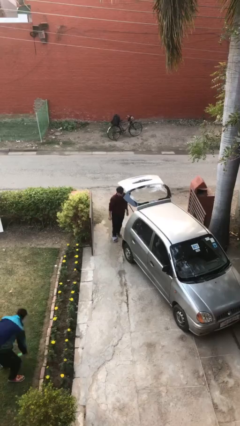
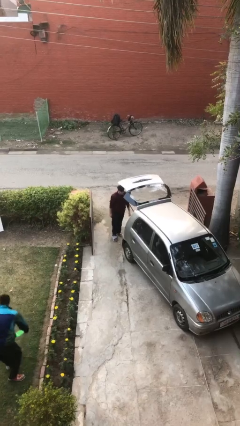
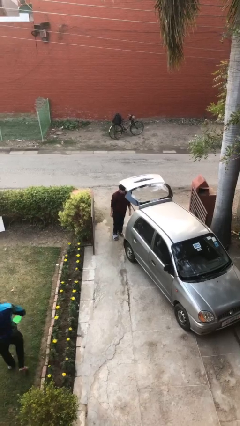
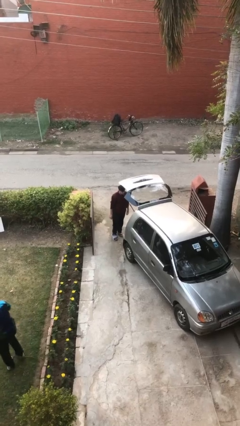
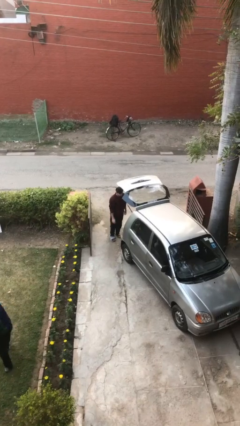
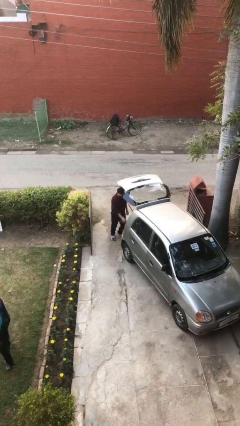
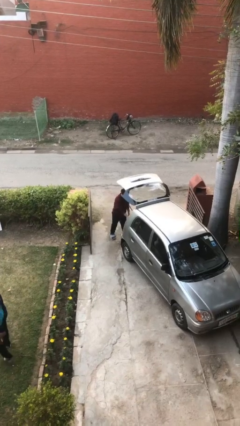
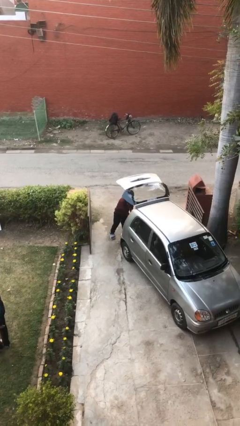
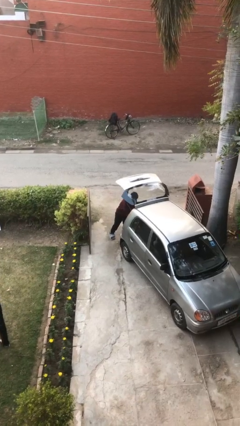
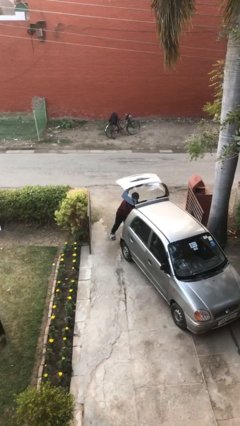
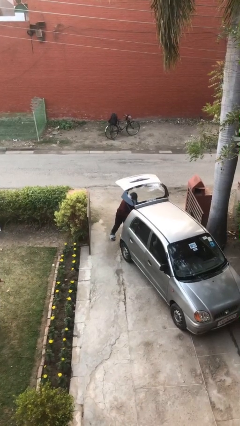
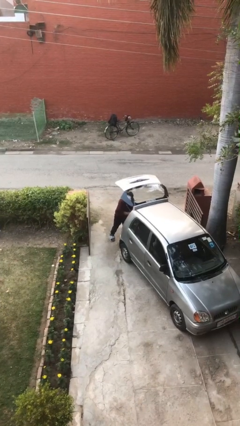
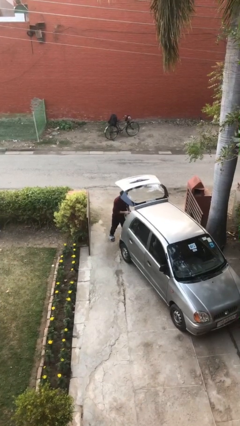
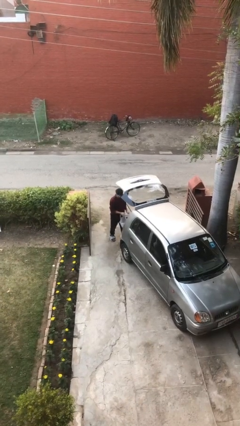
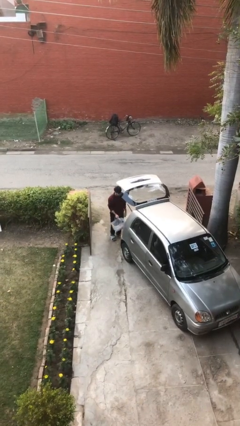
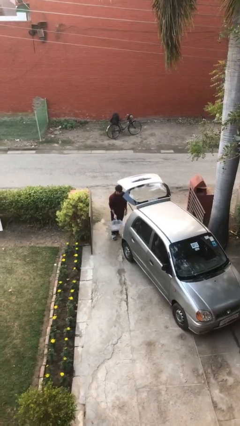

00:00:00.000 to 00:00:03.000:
person unloads car

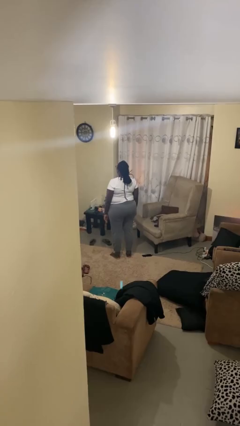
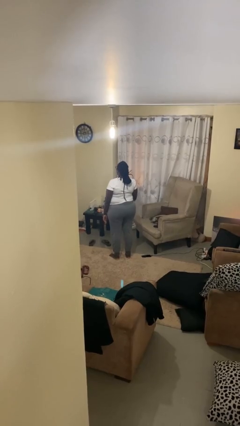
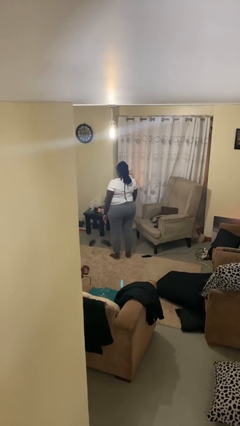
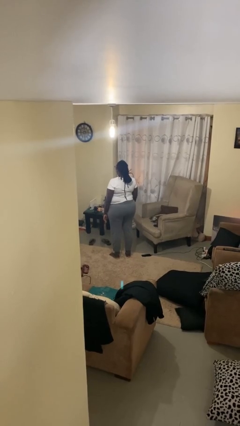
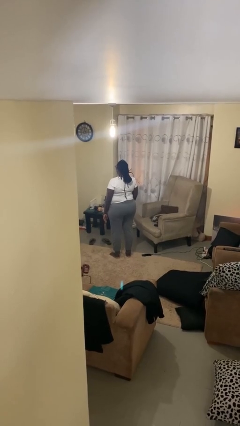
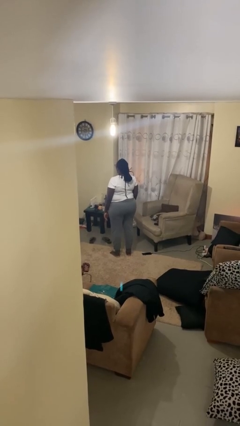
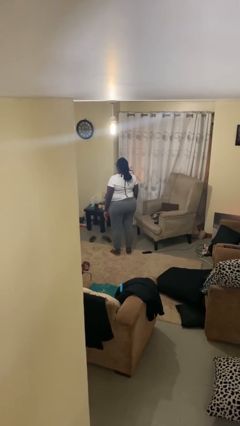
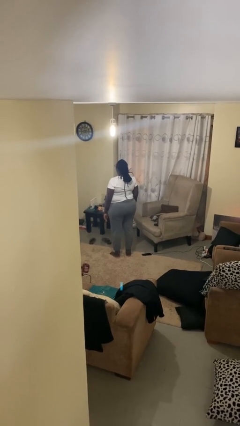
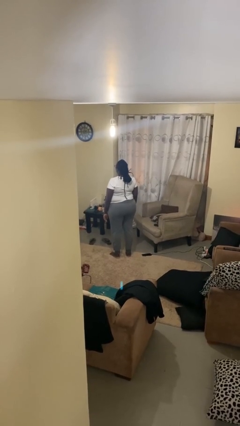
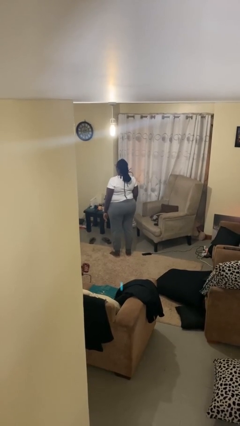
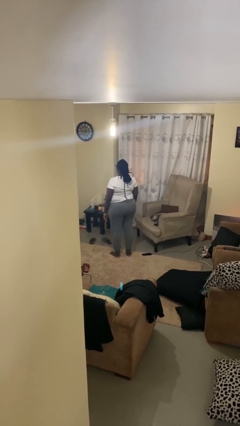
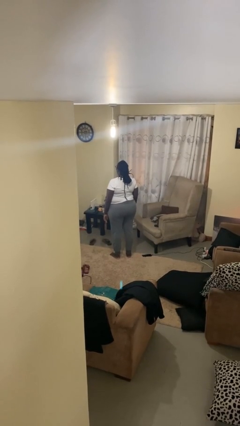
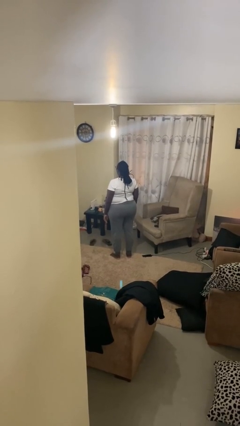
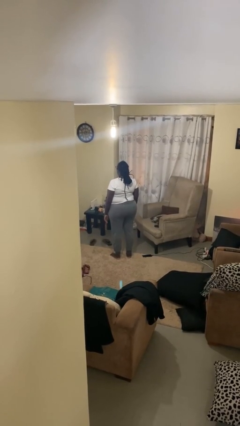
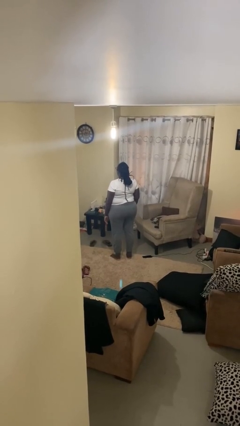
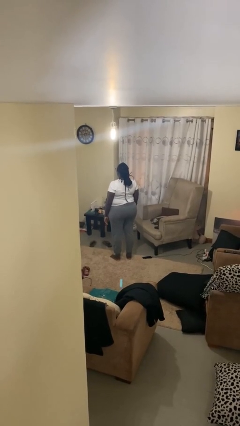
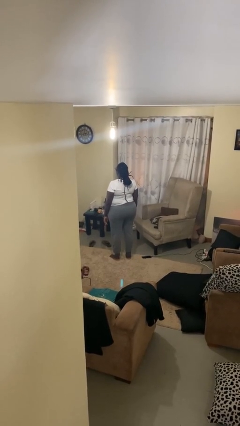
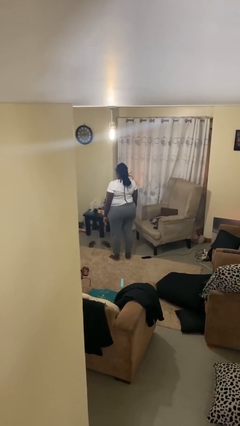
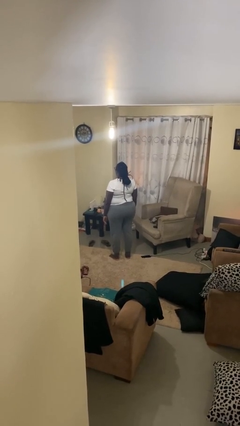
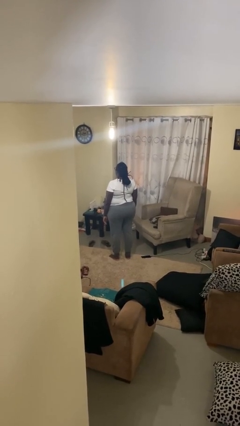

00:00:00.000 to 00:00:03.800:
person slaps hands on thighs

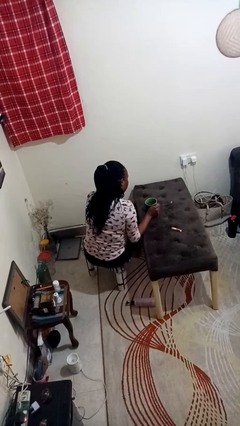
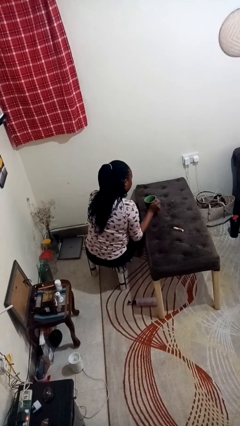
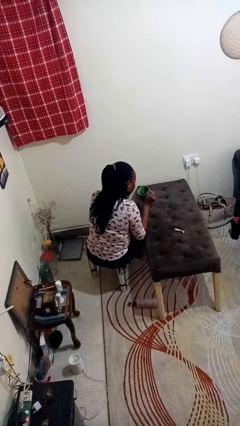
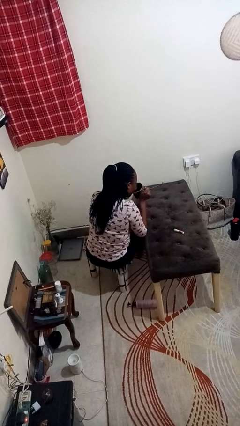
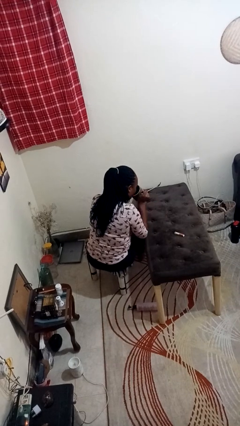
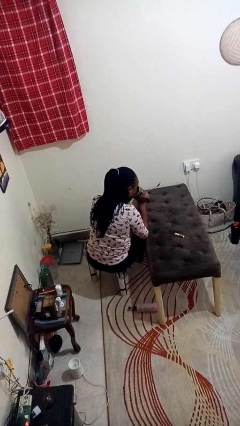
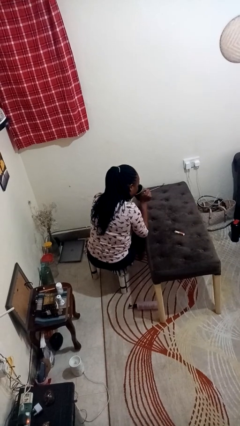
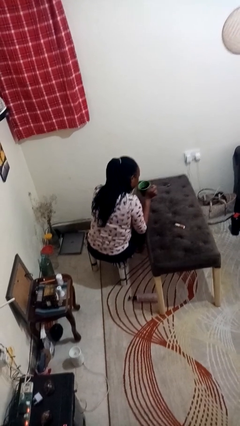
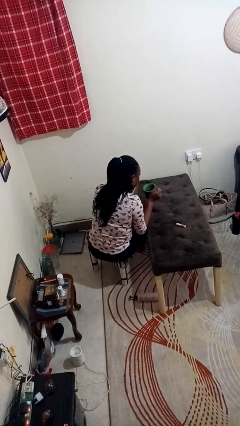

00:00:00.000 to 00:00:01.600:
person drinks from mug

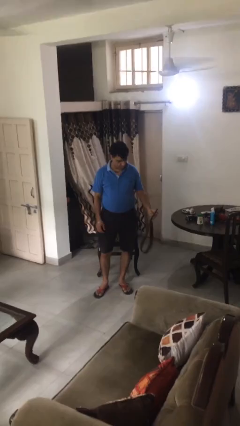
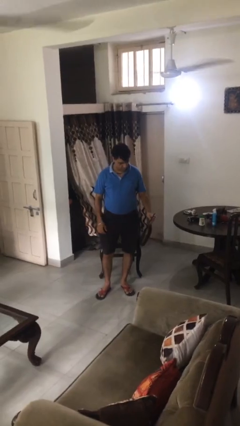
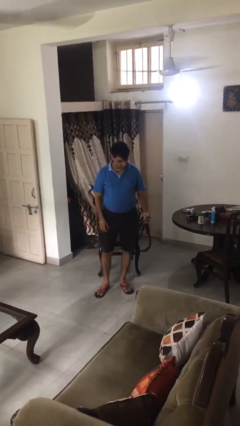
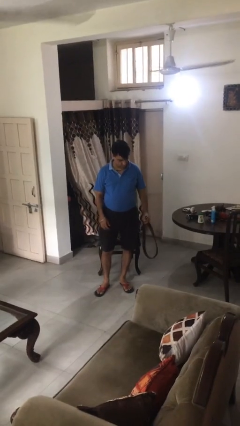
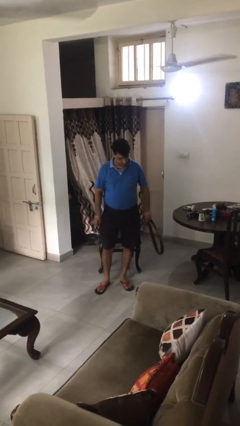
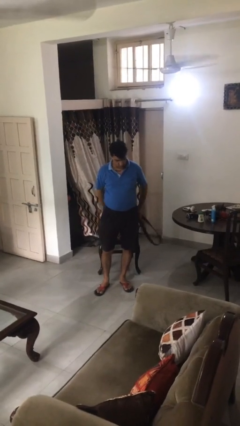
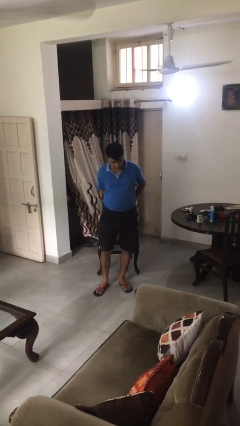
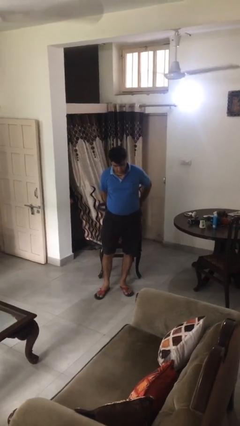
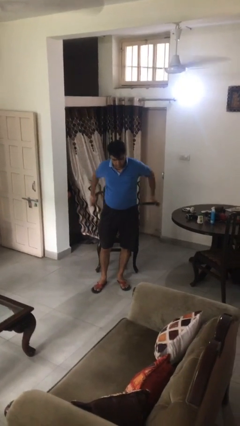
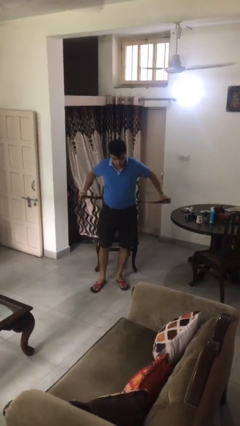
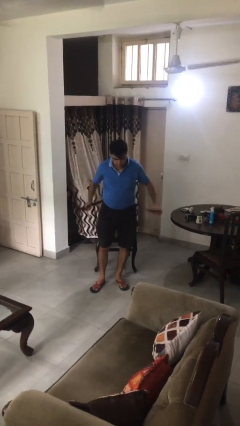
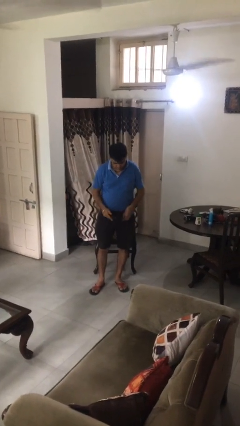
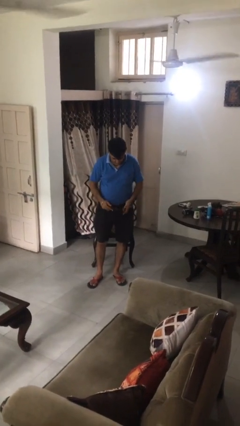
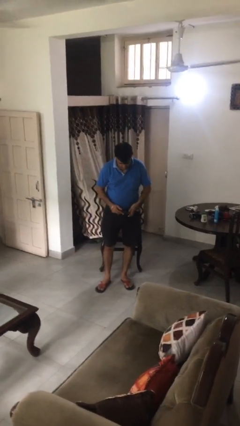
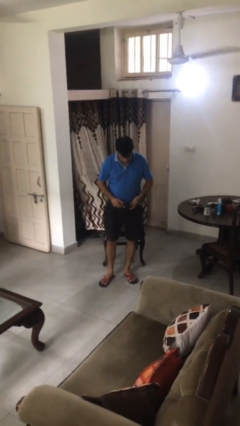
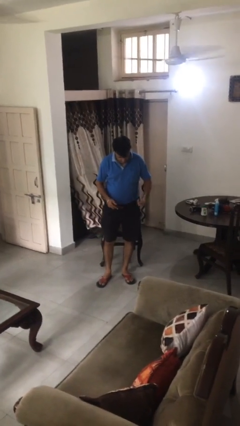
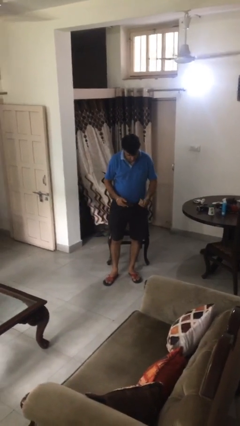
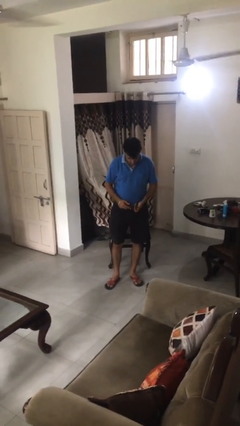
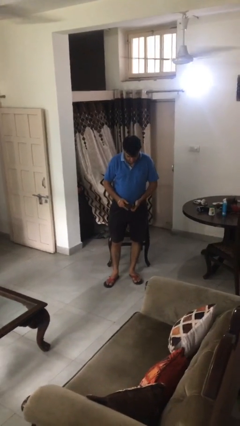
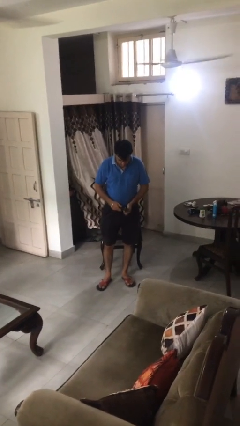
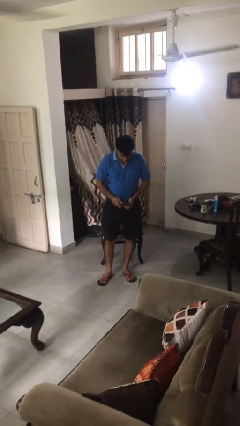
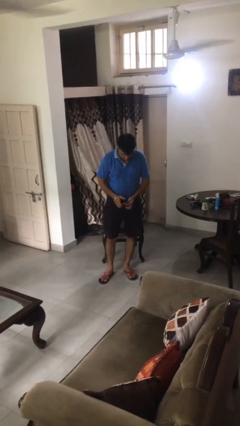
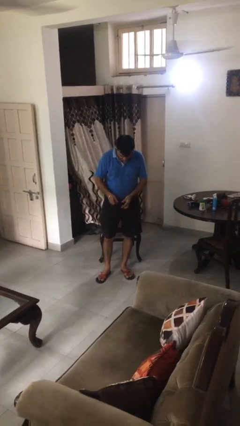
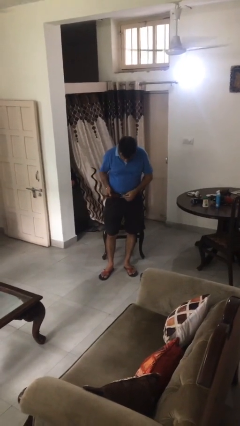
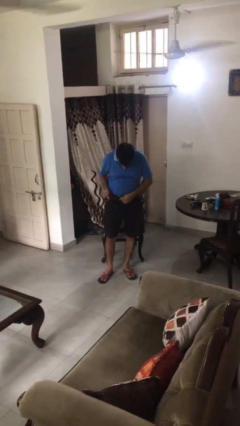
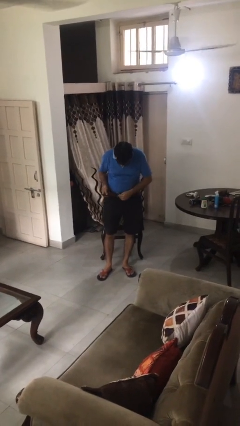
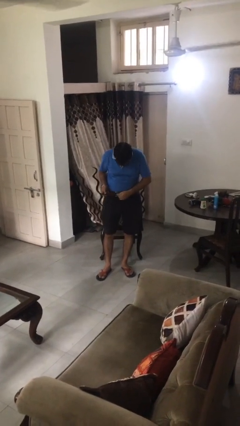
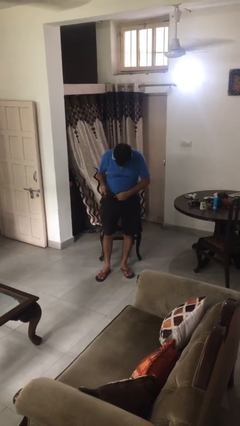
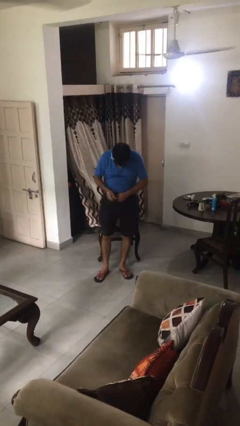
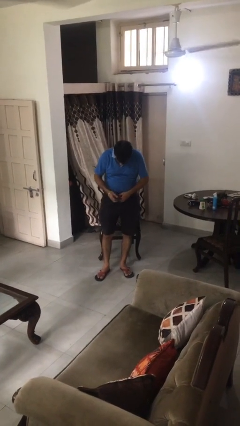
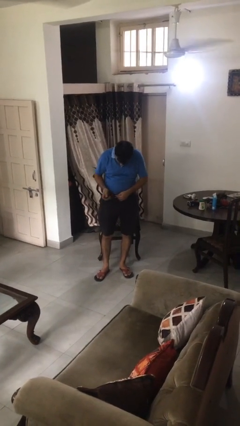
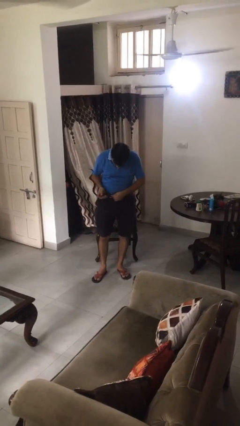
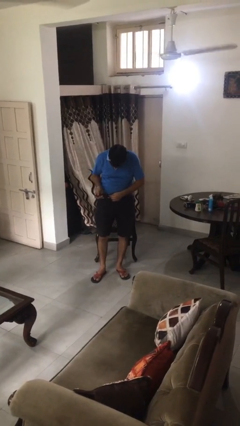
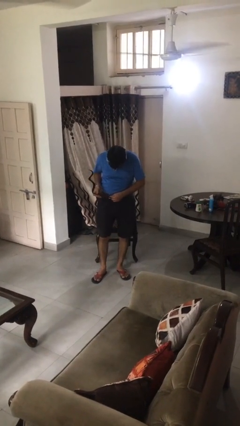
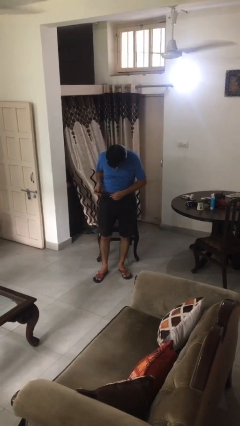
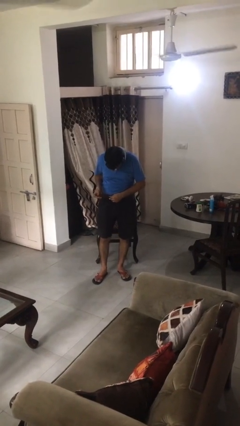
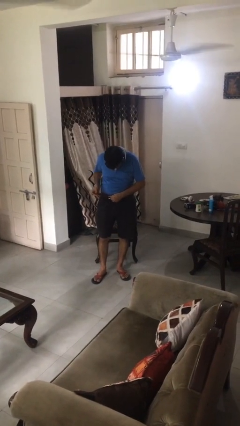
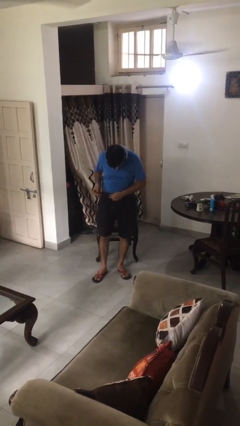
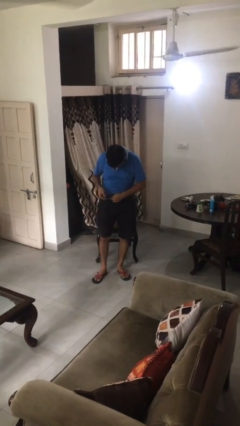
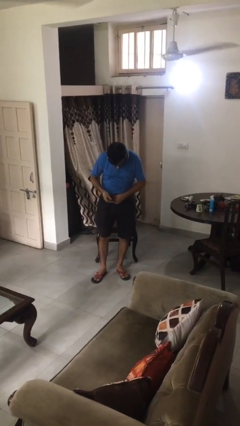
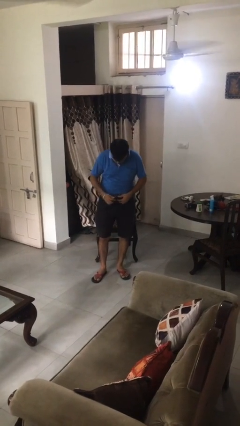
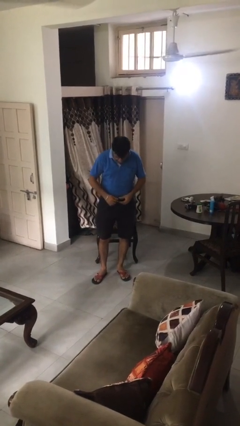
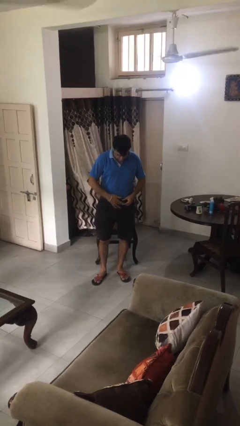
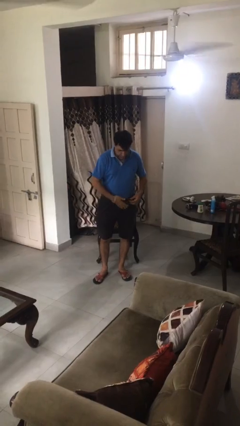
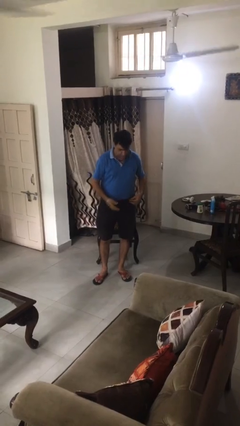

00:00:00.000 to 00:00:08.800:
person puts on belt

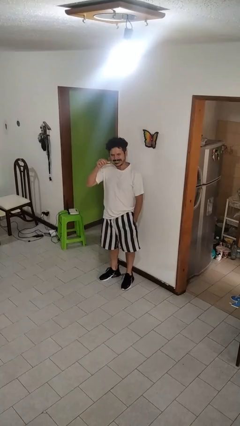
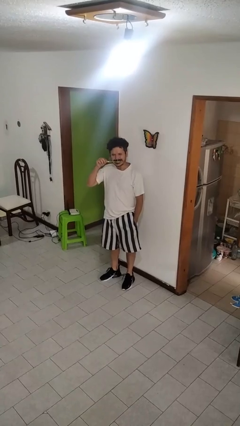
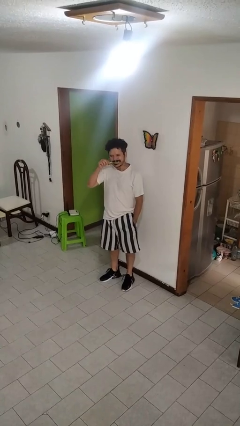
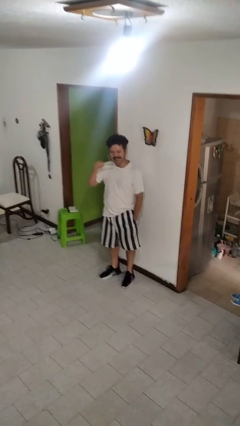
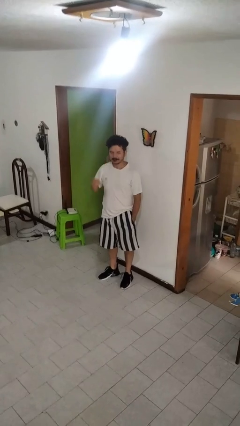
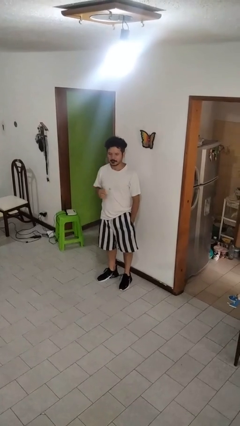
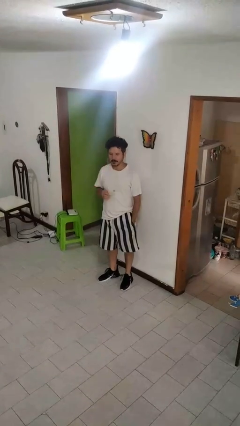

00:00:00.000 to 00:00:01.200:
person brushes teeth
